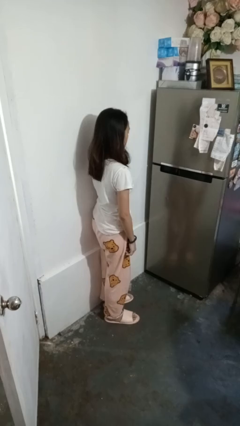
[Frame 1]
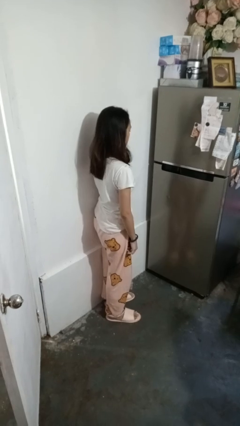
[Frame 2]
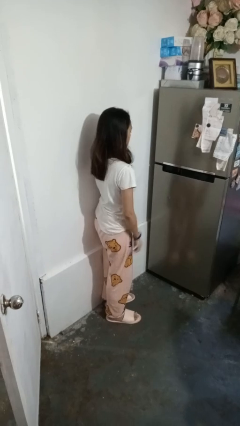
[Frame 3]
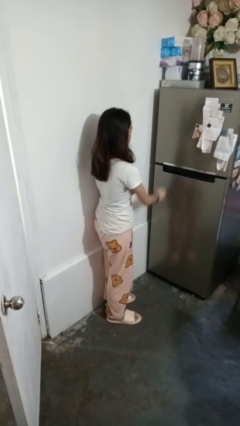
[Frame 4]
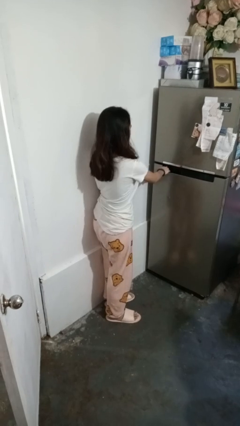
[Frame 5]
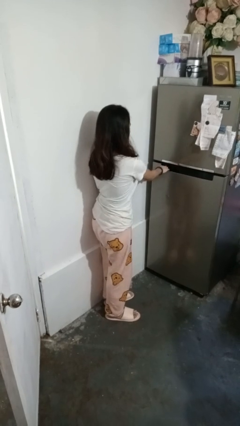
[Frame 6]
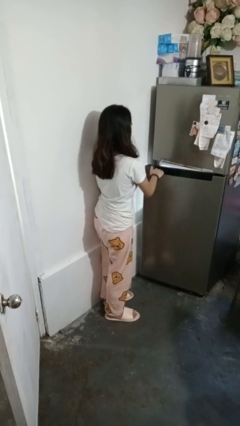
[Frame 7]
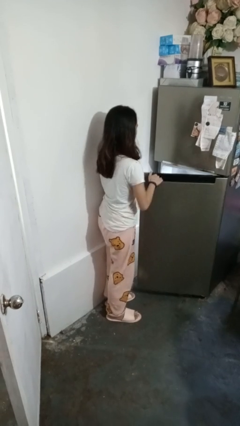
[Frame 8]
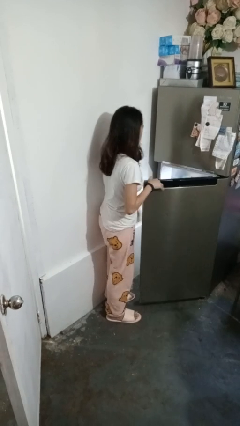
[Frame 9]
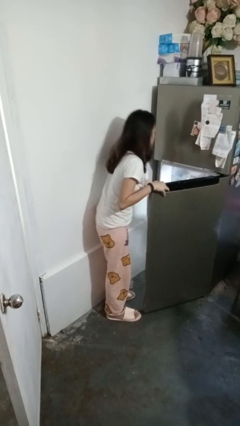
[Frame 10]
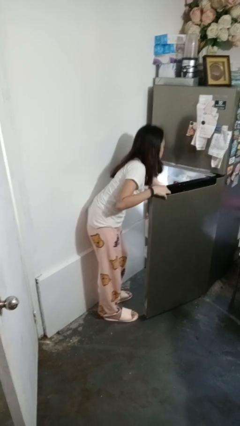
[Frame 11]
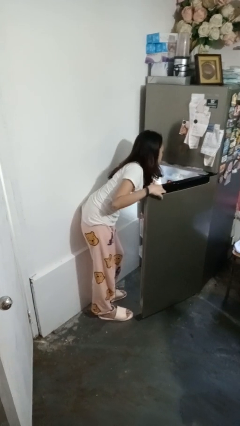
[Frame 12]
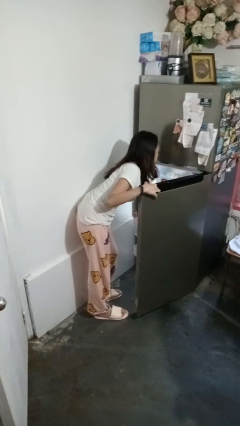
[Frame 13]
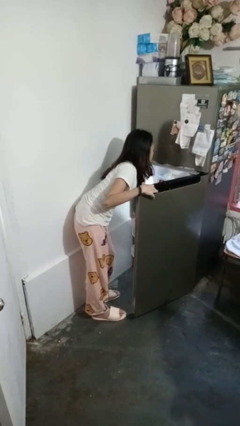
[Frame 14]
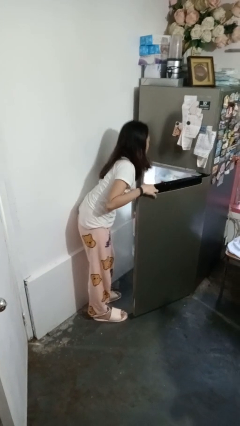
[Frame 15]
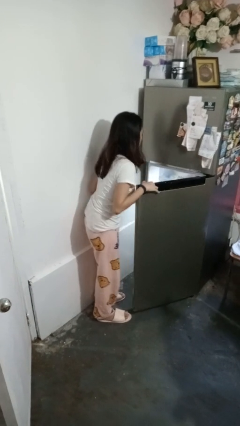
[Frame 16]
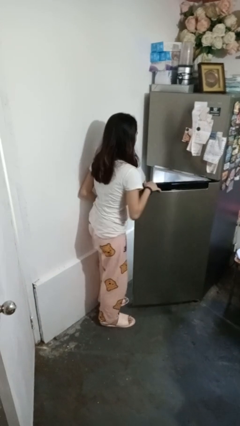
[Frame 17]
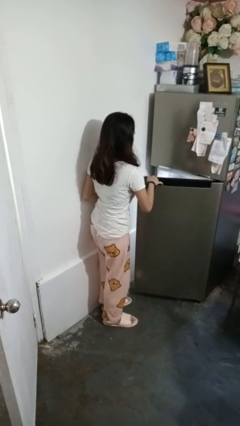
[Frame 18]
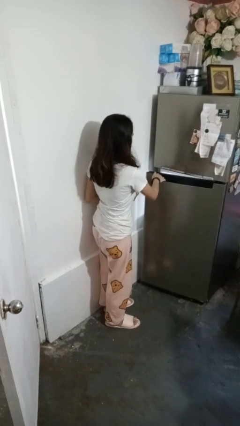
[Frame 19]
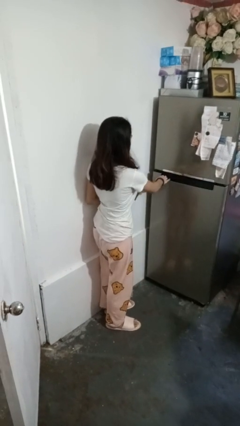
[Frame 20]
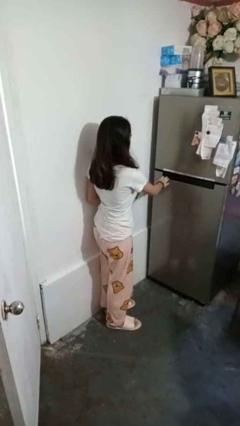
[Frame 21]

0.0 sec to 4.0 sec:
person takes object from refrigerator

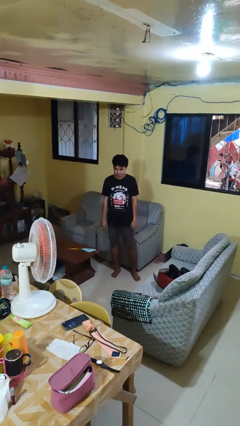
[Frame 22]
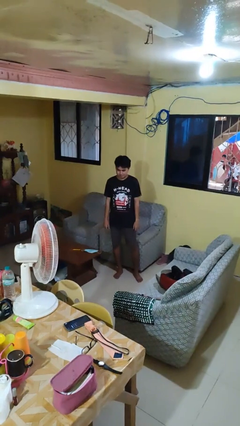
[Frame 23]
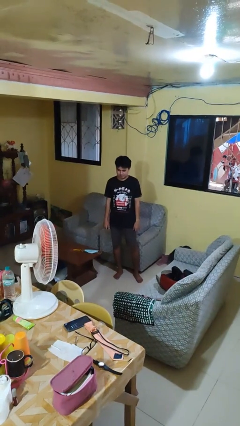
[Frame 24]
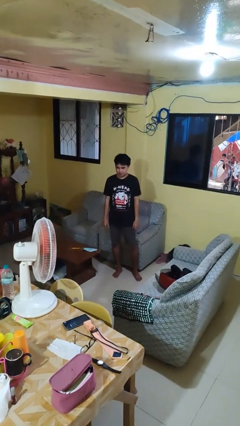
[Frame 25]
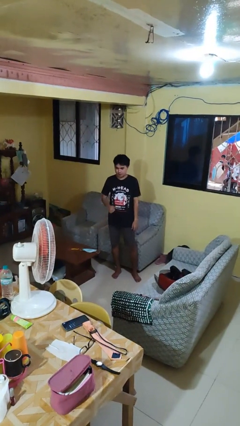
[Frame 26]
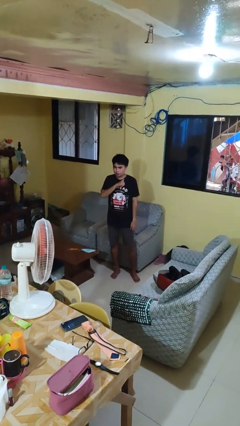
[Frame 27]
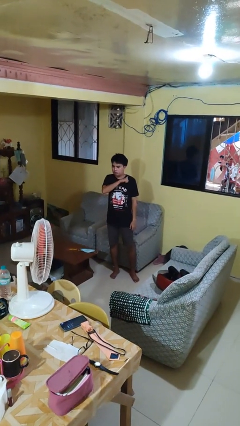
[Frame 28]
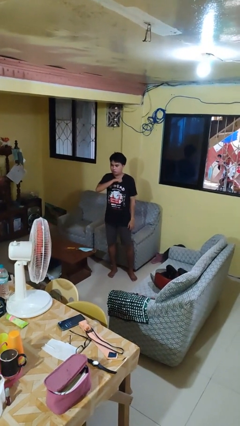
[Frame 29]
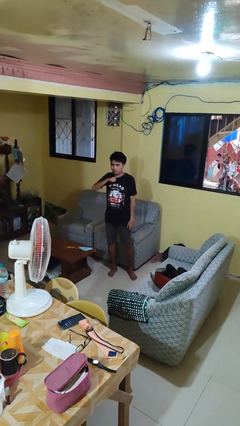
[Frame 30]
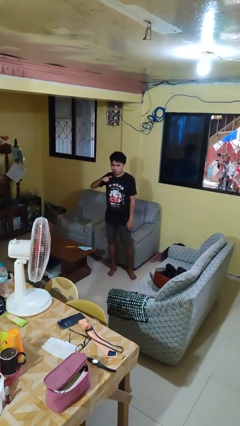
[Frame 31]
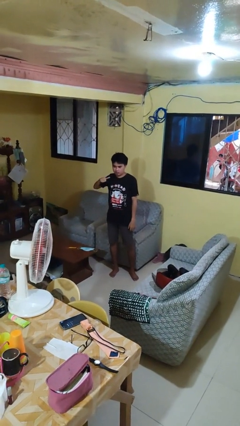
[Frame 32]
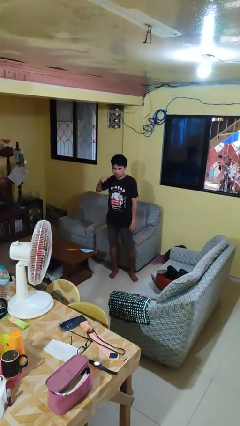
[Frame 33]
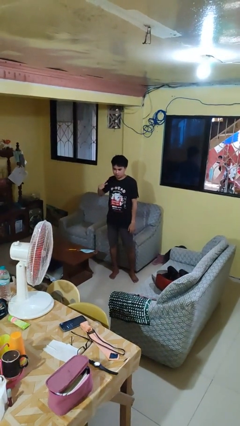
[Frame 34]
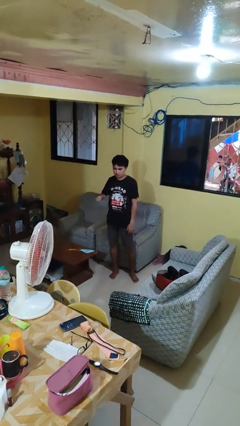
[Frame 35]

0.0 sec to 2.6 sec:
person gestures cut

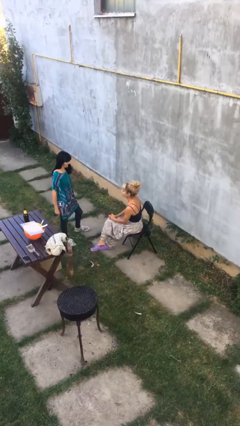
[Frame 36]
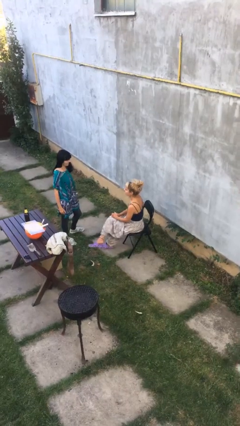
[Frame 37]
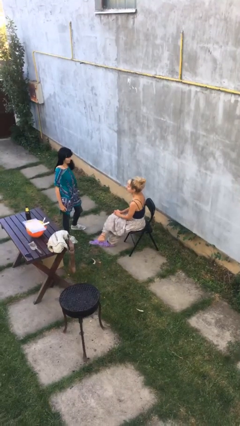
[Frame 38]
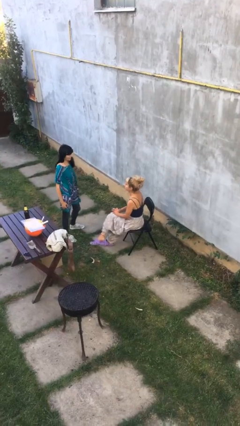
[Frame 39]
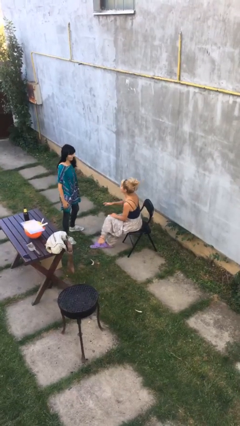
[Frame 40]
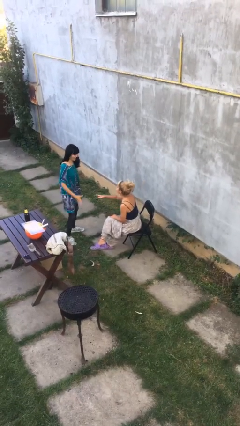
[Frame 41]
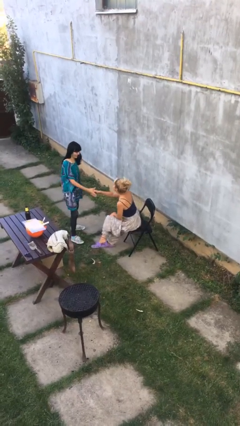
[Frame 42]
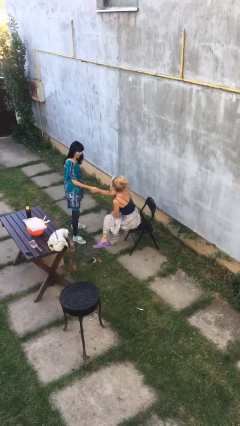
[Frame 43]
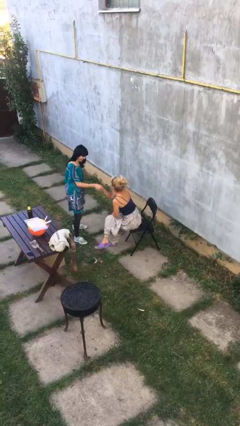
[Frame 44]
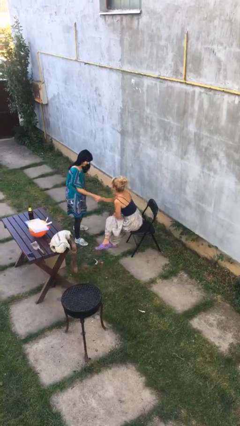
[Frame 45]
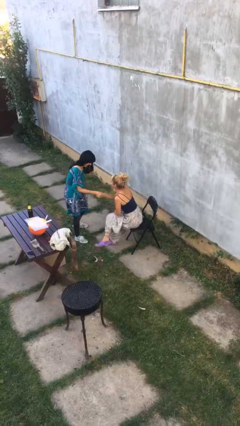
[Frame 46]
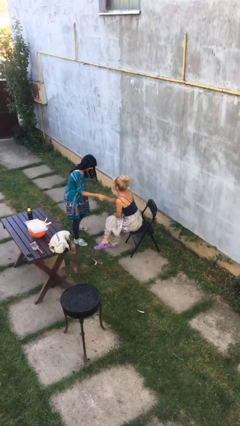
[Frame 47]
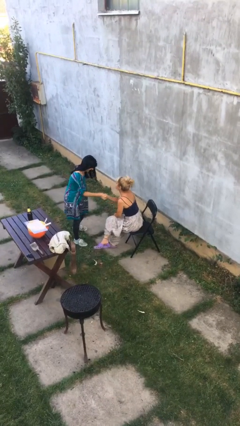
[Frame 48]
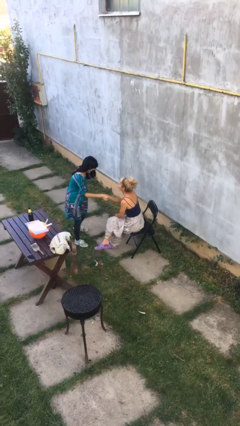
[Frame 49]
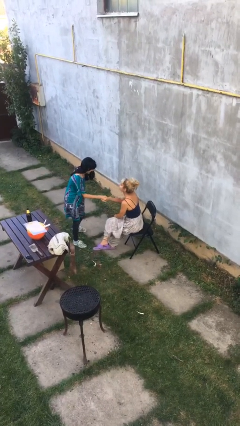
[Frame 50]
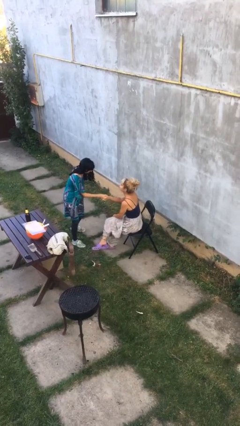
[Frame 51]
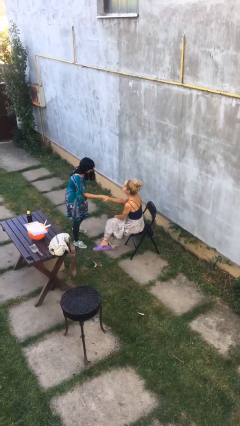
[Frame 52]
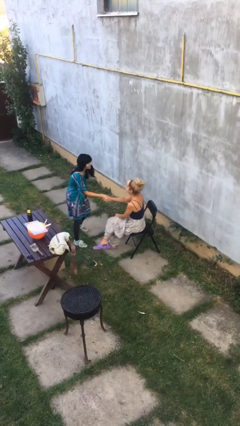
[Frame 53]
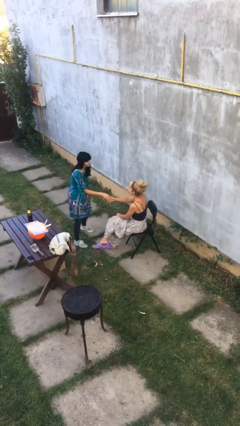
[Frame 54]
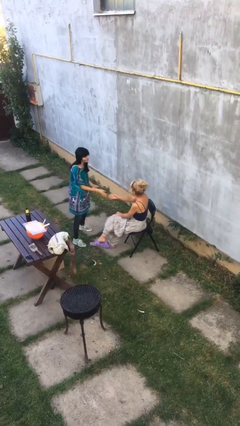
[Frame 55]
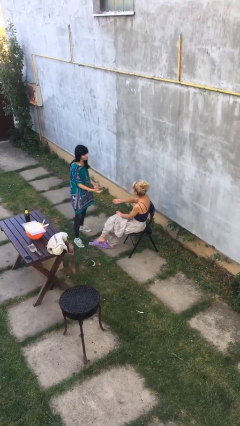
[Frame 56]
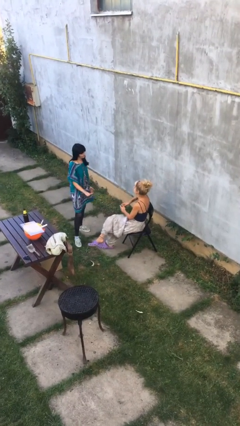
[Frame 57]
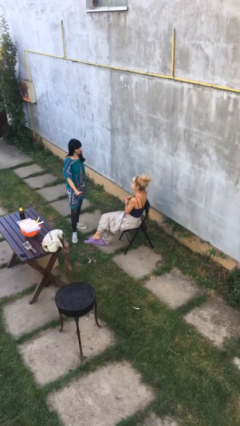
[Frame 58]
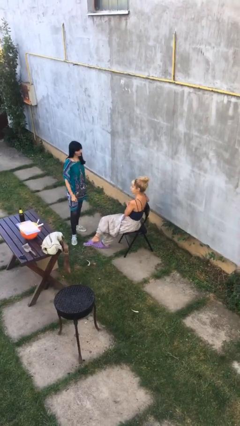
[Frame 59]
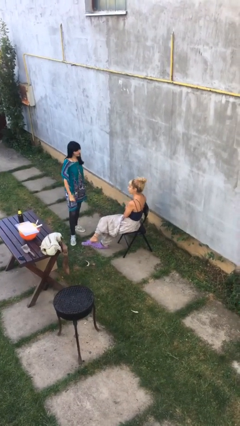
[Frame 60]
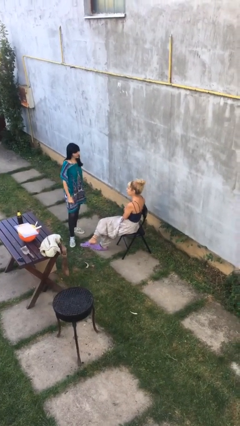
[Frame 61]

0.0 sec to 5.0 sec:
person shakes hand

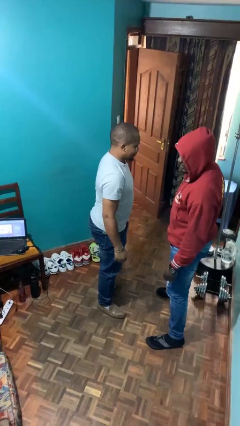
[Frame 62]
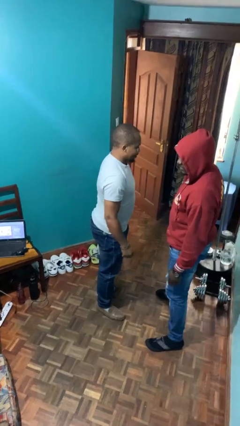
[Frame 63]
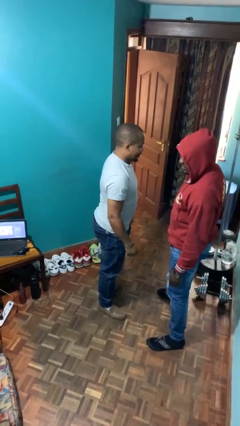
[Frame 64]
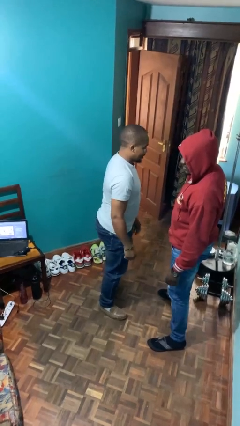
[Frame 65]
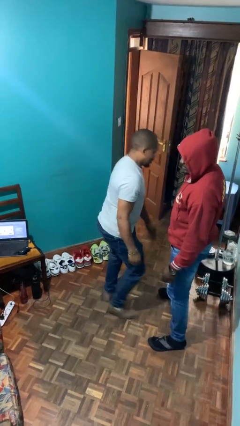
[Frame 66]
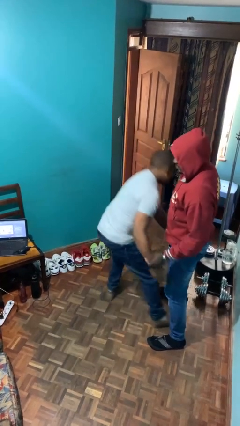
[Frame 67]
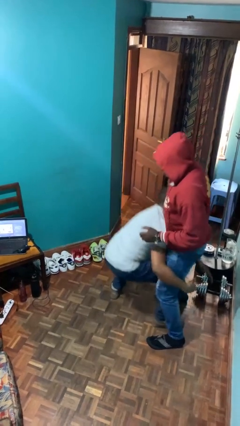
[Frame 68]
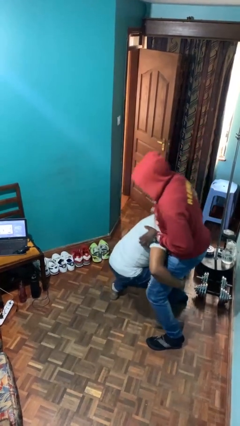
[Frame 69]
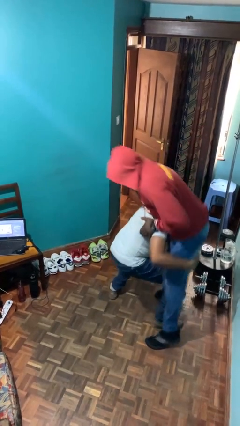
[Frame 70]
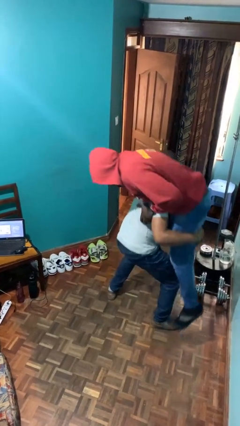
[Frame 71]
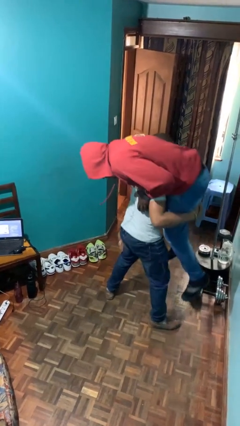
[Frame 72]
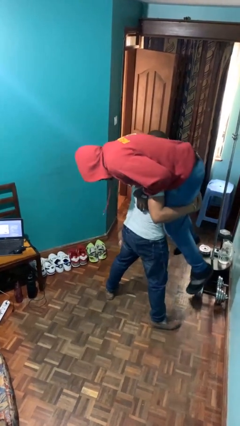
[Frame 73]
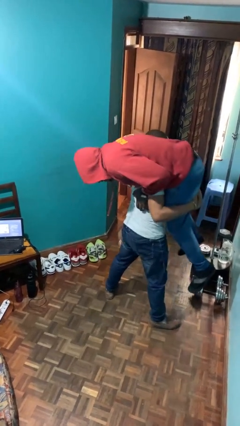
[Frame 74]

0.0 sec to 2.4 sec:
person carries person over shoulder

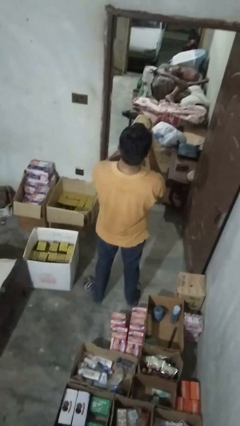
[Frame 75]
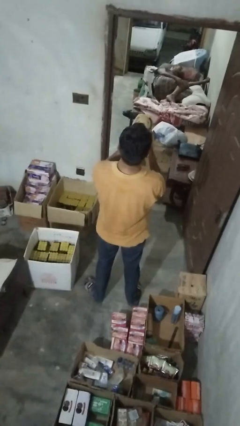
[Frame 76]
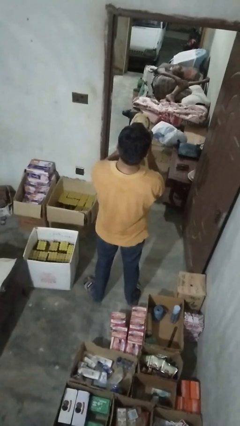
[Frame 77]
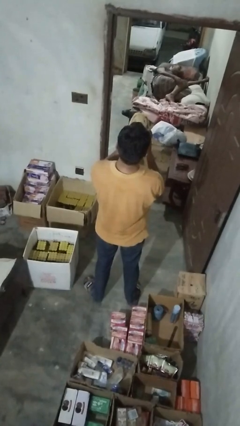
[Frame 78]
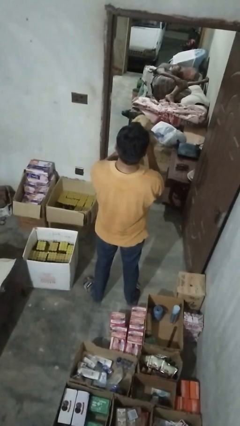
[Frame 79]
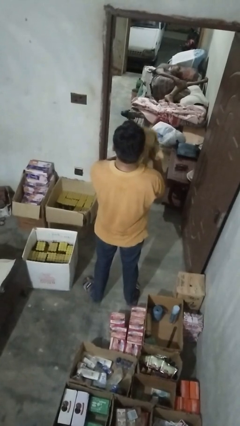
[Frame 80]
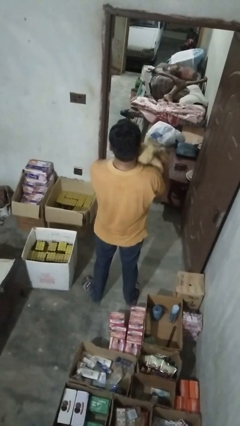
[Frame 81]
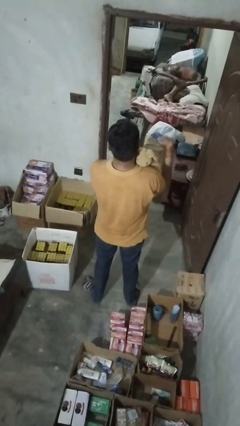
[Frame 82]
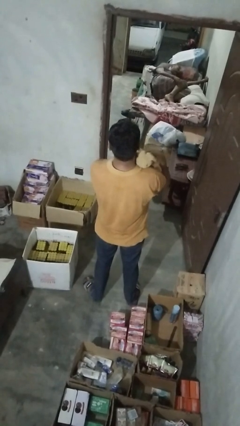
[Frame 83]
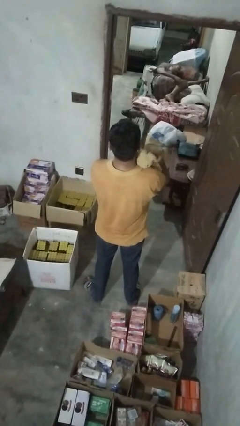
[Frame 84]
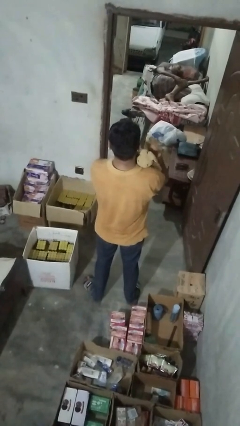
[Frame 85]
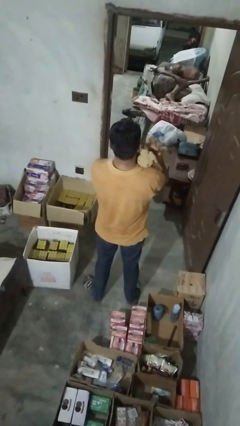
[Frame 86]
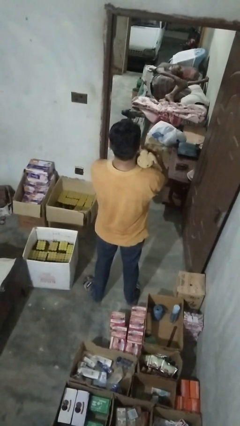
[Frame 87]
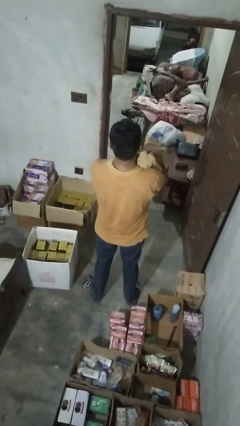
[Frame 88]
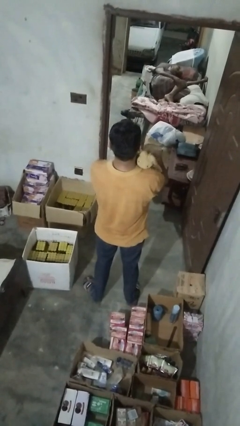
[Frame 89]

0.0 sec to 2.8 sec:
person hugs stuffed animal

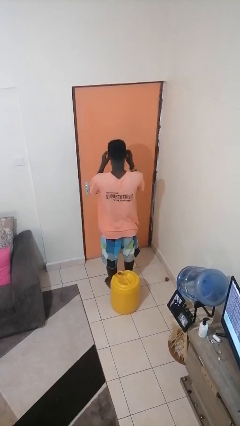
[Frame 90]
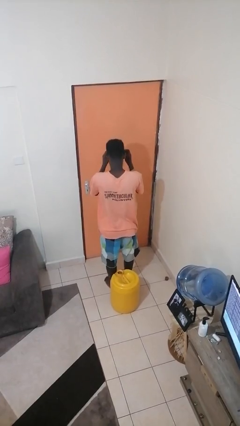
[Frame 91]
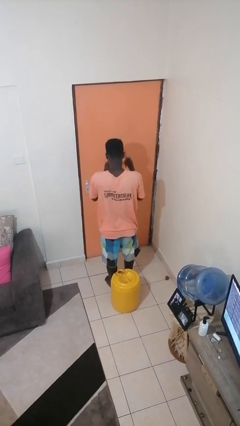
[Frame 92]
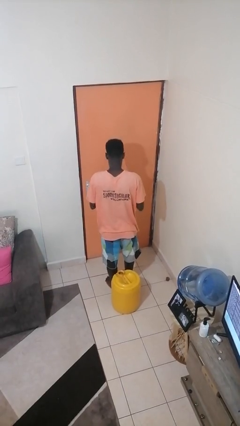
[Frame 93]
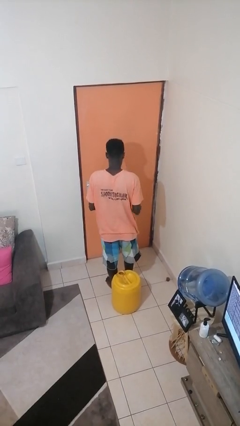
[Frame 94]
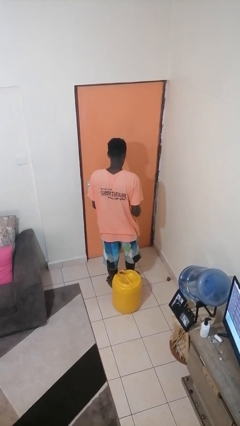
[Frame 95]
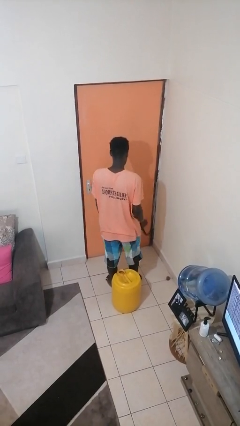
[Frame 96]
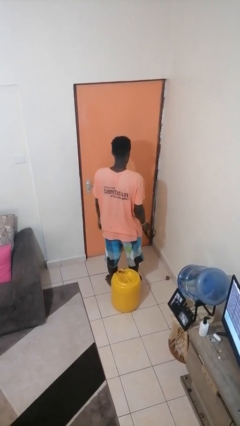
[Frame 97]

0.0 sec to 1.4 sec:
person takes off sunglasses
